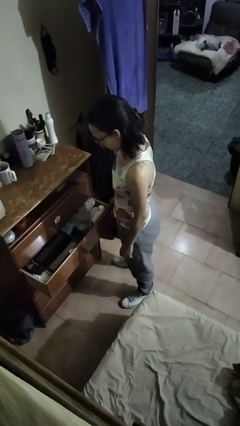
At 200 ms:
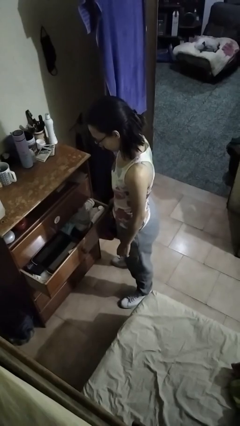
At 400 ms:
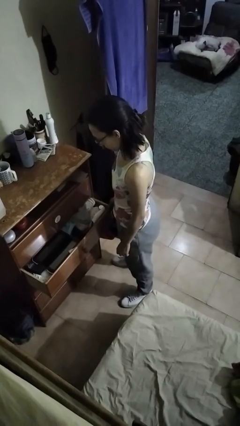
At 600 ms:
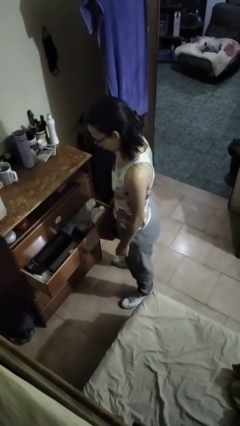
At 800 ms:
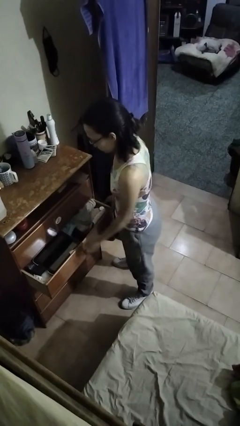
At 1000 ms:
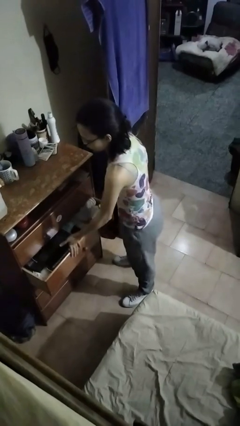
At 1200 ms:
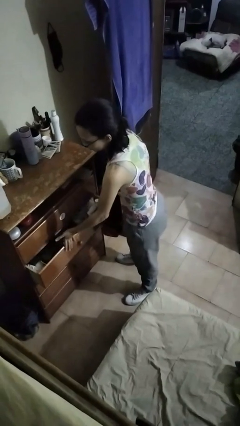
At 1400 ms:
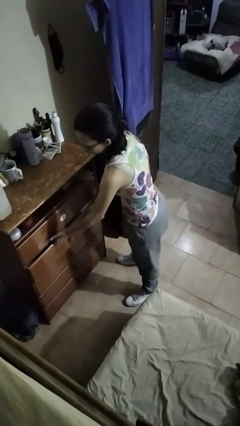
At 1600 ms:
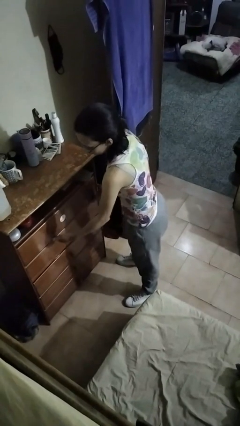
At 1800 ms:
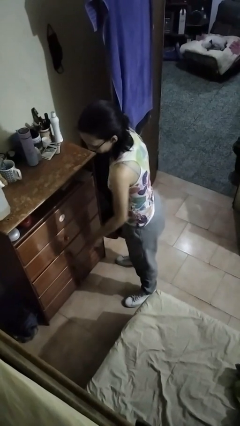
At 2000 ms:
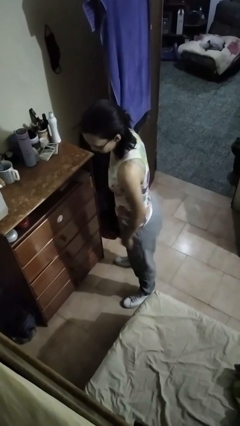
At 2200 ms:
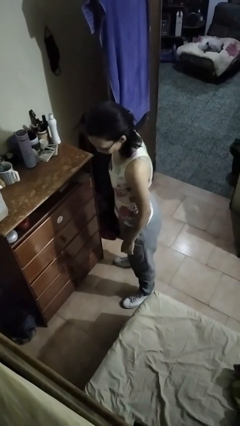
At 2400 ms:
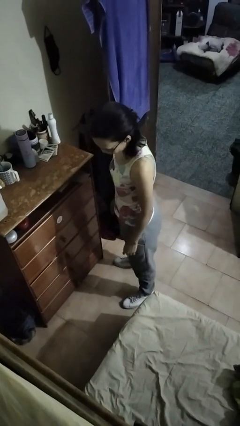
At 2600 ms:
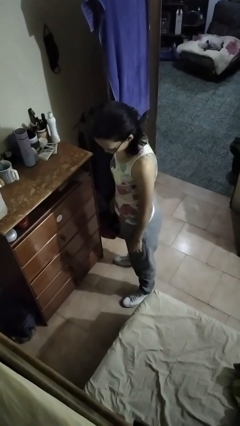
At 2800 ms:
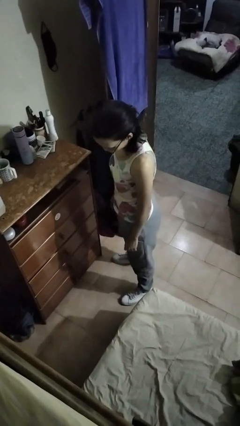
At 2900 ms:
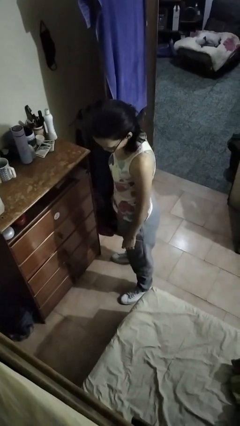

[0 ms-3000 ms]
person closes dresser drawer

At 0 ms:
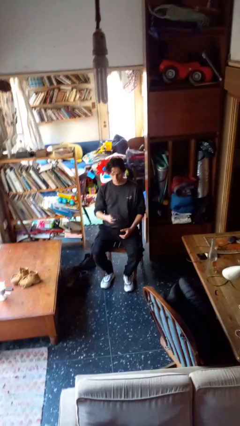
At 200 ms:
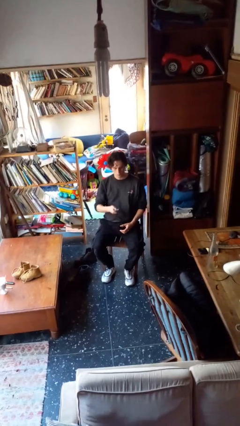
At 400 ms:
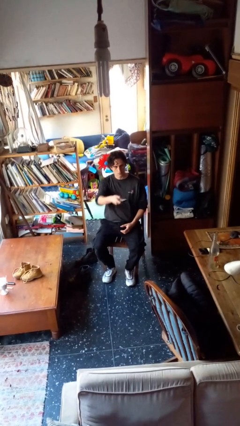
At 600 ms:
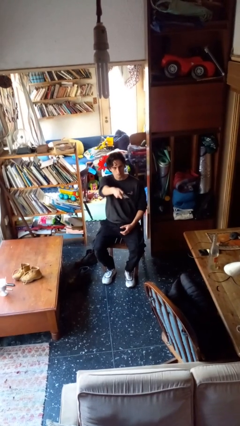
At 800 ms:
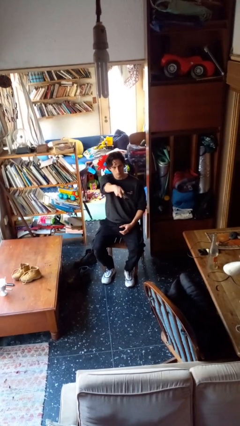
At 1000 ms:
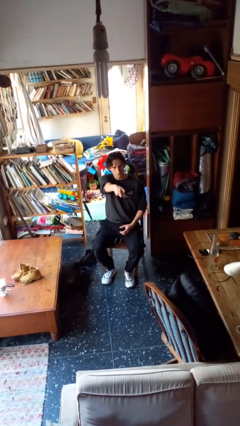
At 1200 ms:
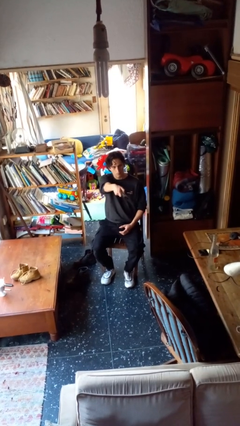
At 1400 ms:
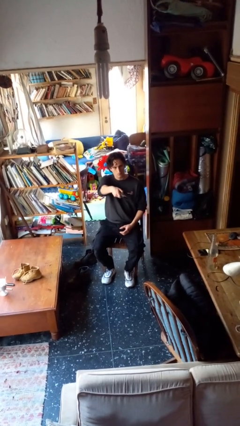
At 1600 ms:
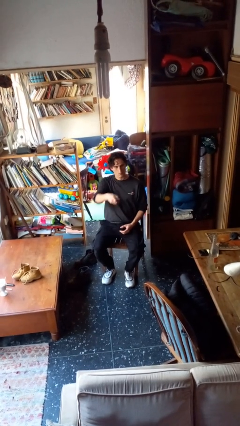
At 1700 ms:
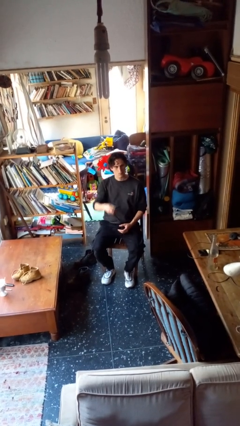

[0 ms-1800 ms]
person uses television remote

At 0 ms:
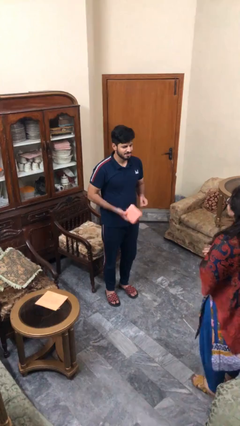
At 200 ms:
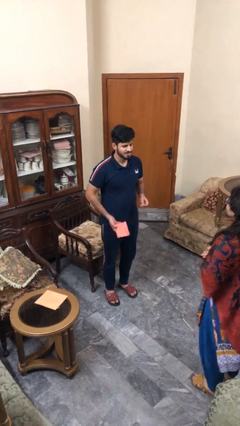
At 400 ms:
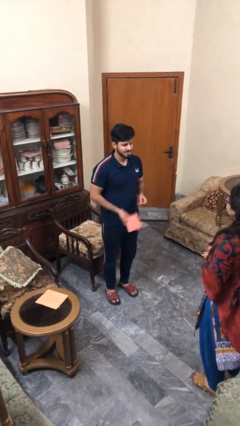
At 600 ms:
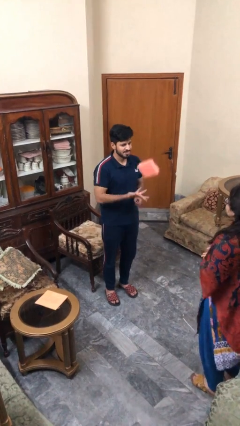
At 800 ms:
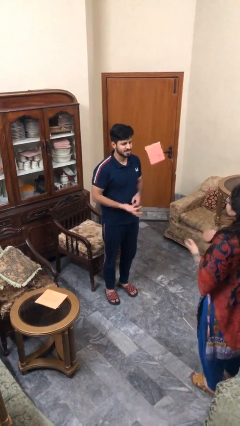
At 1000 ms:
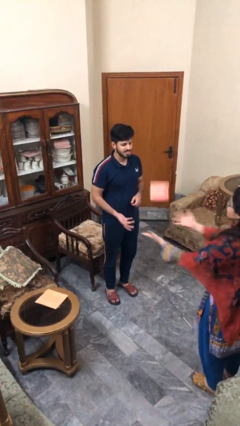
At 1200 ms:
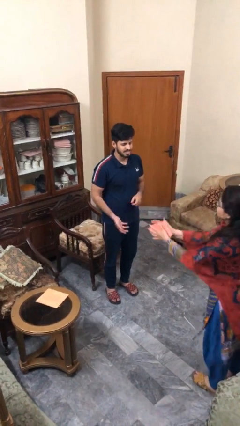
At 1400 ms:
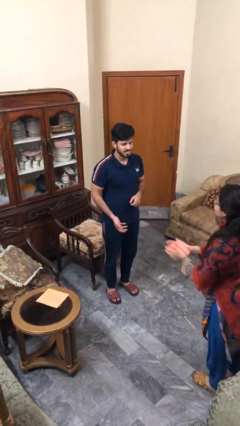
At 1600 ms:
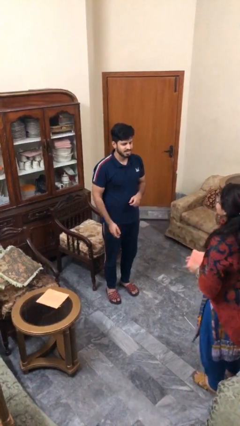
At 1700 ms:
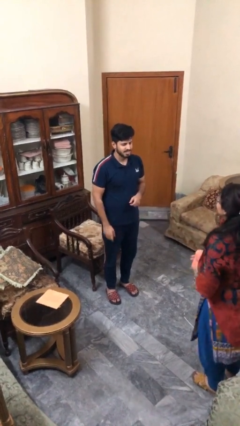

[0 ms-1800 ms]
person throws object to person

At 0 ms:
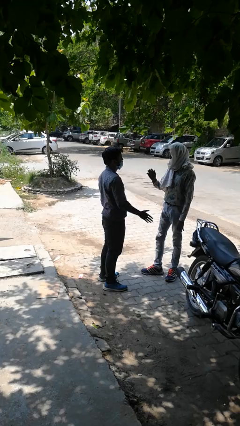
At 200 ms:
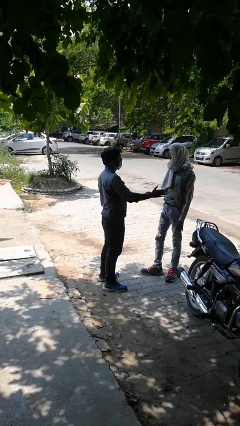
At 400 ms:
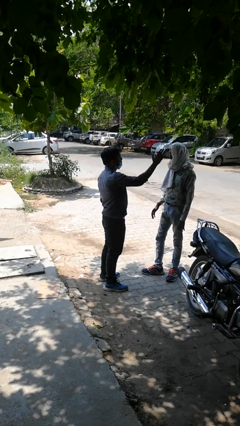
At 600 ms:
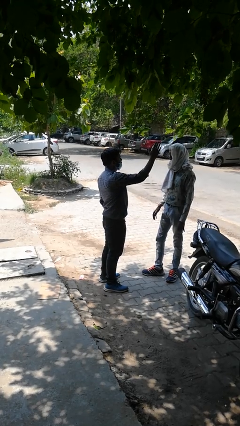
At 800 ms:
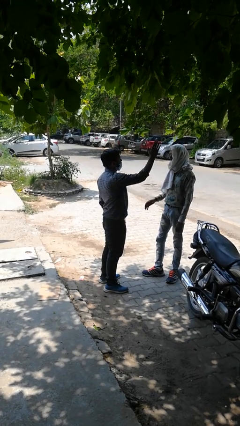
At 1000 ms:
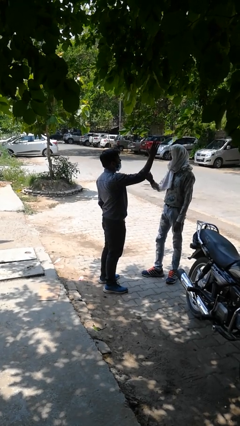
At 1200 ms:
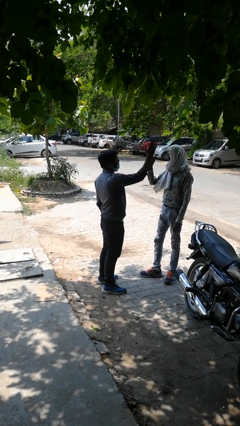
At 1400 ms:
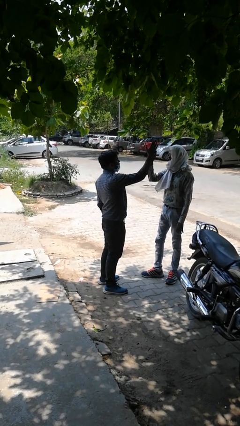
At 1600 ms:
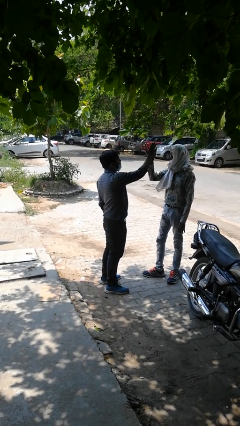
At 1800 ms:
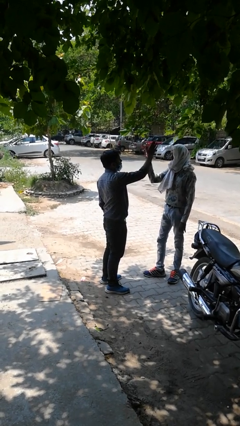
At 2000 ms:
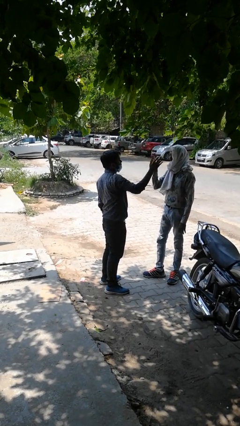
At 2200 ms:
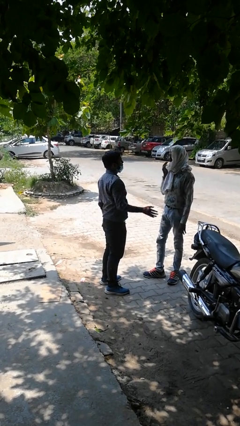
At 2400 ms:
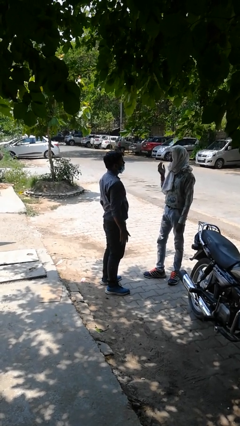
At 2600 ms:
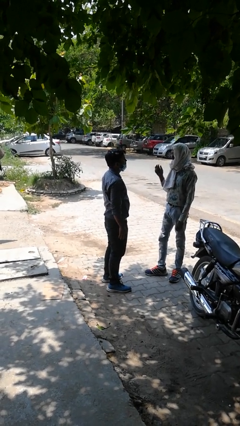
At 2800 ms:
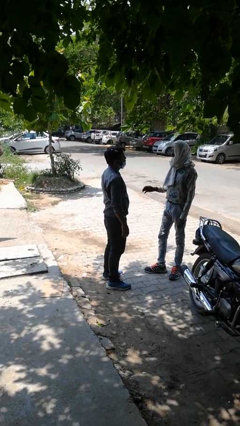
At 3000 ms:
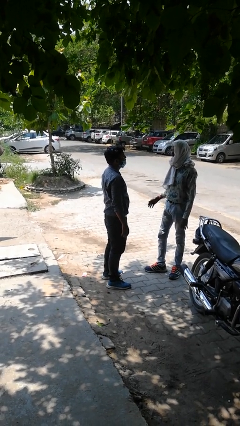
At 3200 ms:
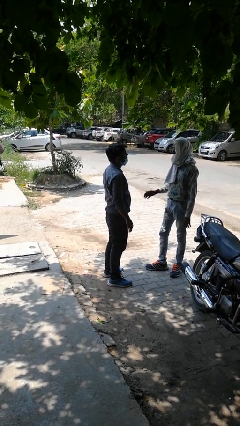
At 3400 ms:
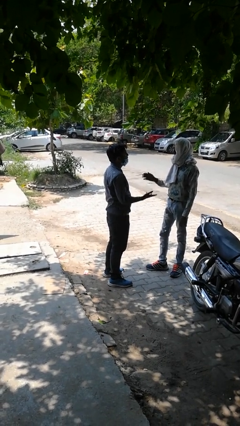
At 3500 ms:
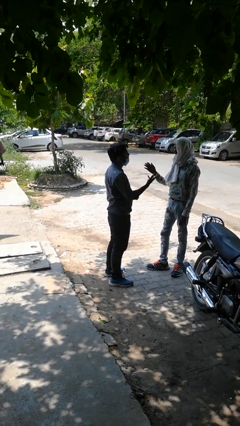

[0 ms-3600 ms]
person highfives hand

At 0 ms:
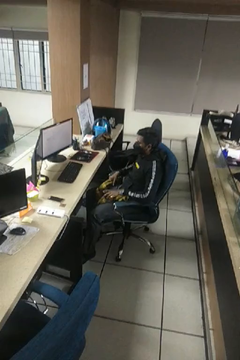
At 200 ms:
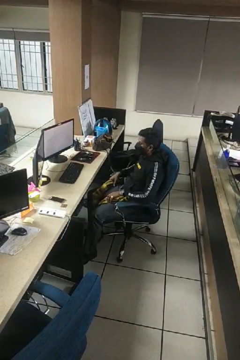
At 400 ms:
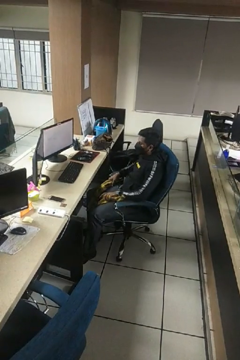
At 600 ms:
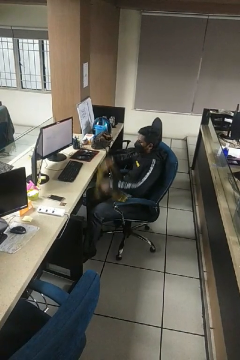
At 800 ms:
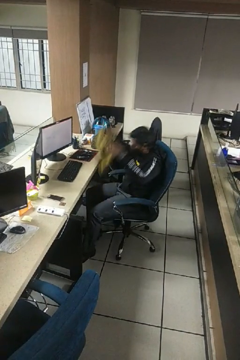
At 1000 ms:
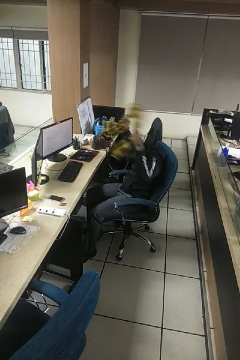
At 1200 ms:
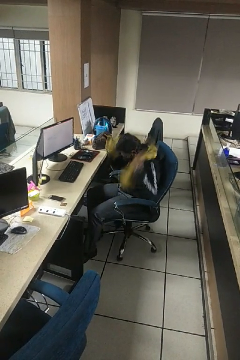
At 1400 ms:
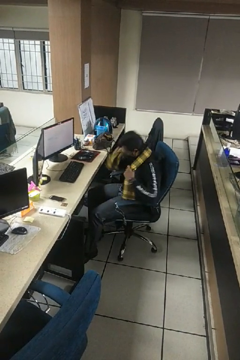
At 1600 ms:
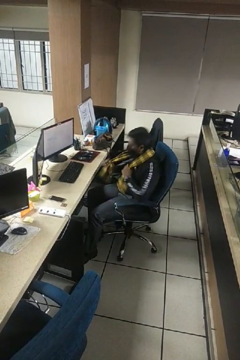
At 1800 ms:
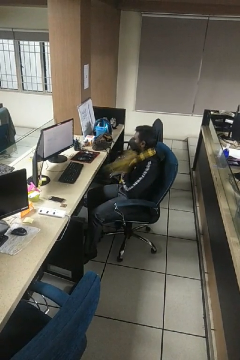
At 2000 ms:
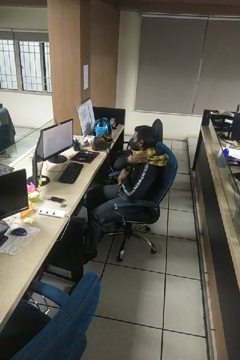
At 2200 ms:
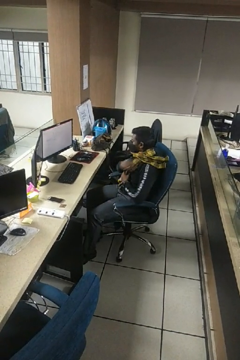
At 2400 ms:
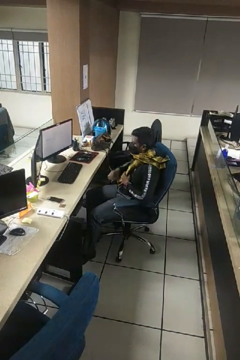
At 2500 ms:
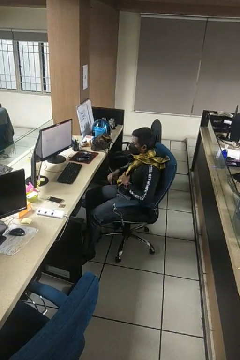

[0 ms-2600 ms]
person puts on scarf

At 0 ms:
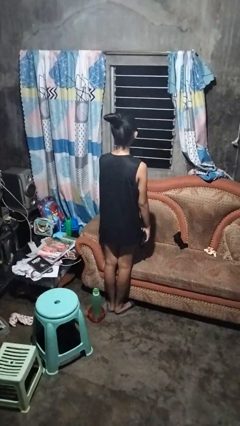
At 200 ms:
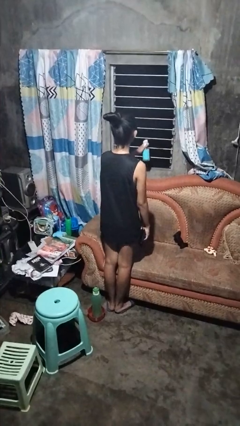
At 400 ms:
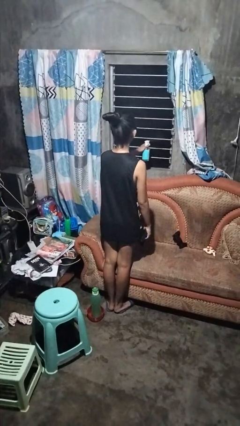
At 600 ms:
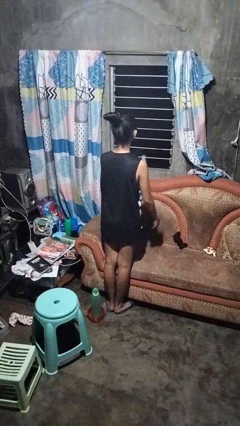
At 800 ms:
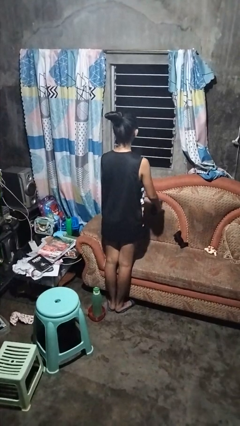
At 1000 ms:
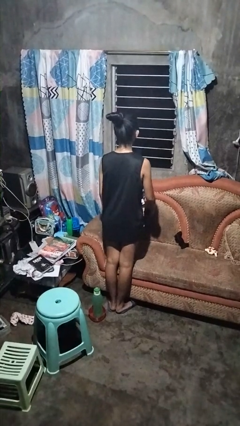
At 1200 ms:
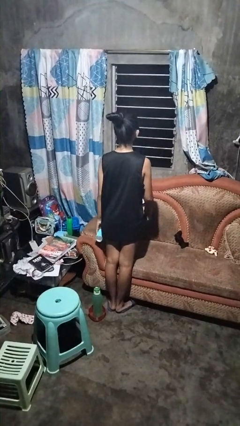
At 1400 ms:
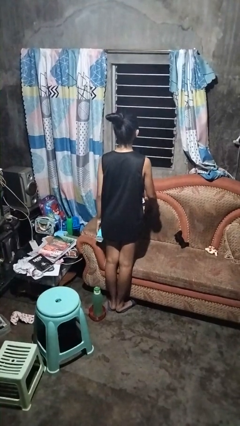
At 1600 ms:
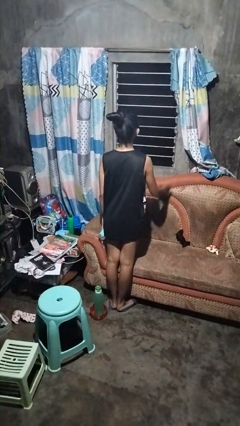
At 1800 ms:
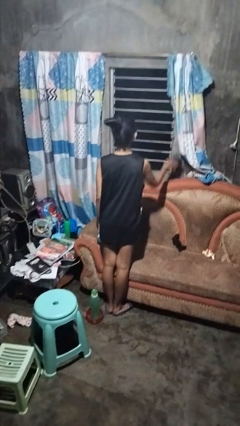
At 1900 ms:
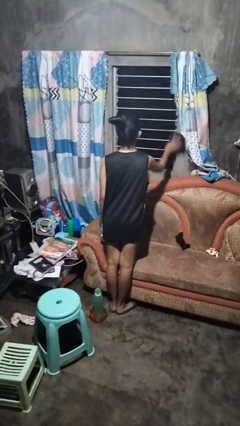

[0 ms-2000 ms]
person sprays from bottle

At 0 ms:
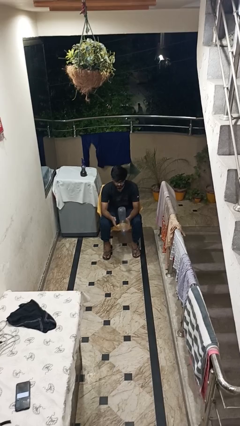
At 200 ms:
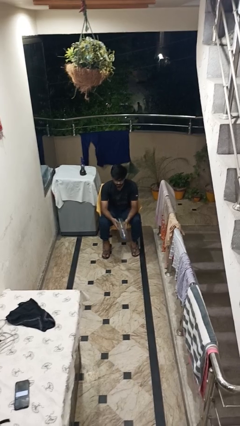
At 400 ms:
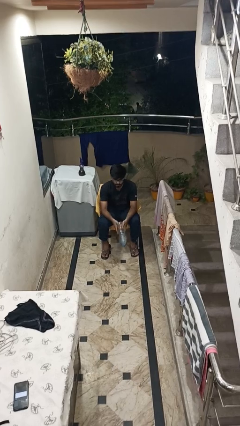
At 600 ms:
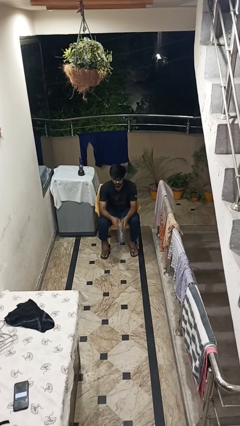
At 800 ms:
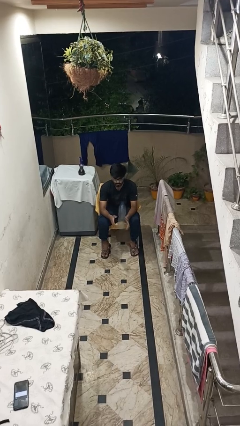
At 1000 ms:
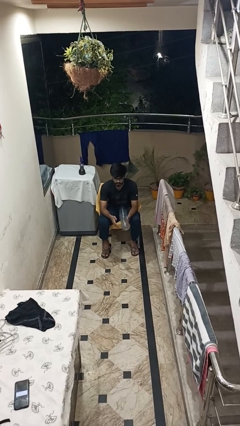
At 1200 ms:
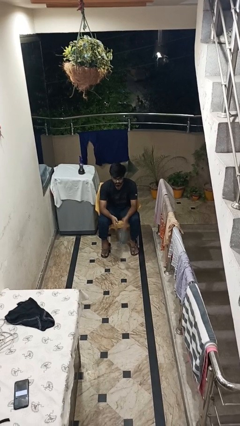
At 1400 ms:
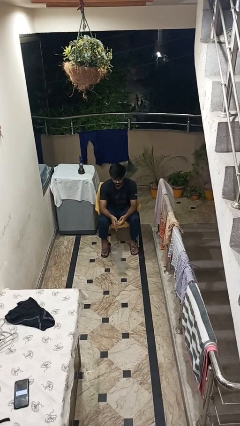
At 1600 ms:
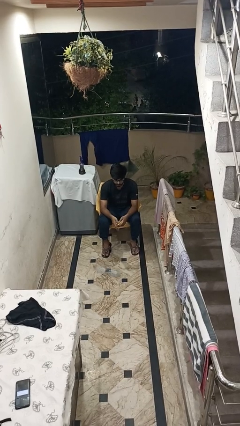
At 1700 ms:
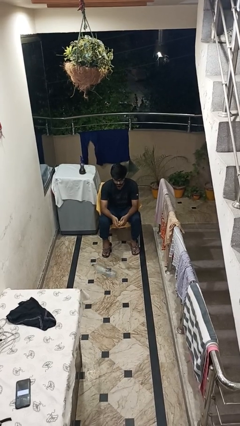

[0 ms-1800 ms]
person drops object

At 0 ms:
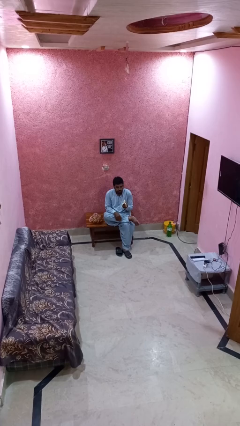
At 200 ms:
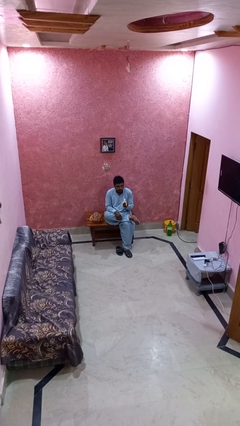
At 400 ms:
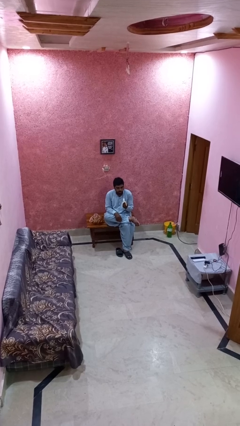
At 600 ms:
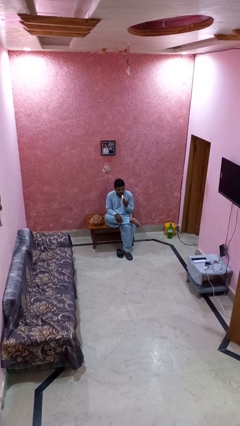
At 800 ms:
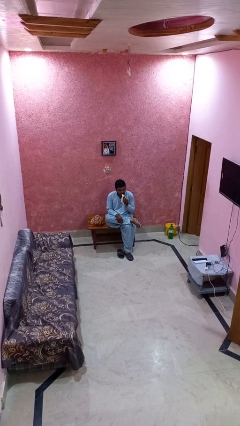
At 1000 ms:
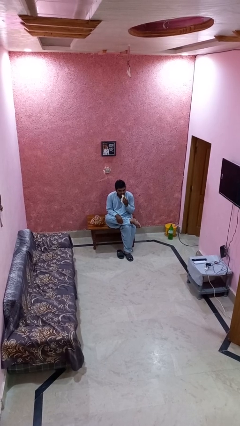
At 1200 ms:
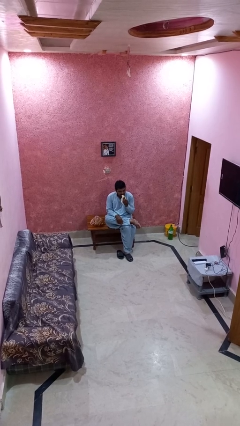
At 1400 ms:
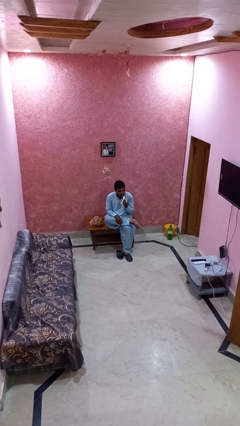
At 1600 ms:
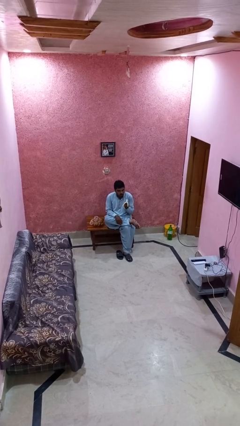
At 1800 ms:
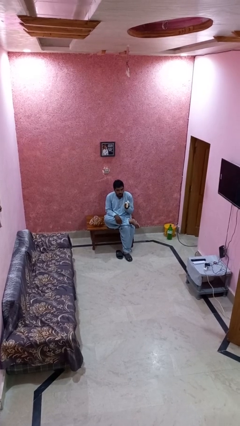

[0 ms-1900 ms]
person eats banana
